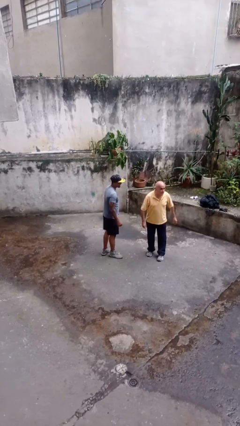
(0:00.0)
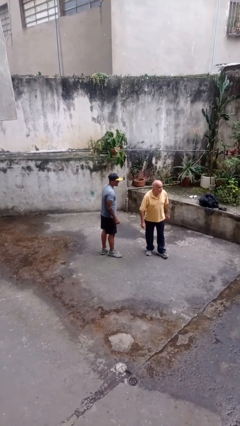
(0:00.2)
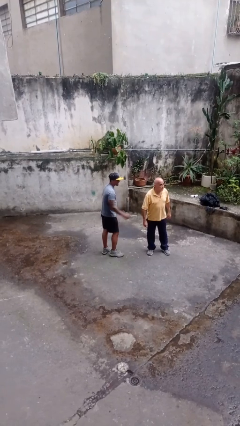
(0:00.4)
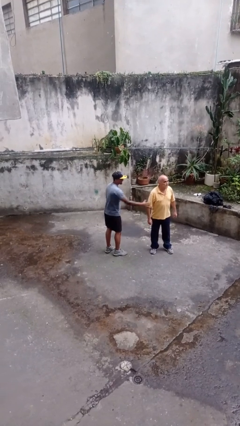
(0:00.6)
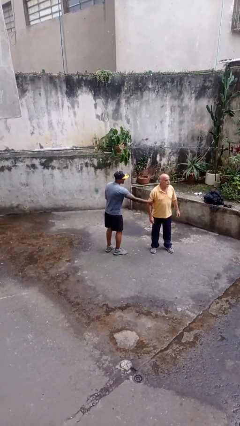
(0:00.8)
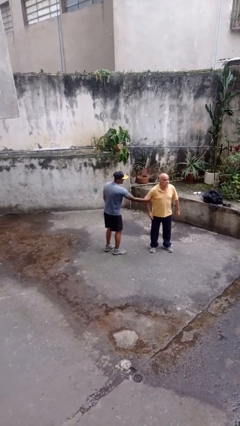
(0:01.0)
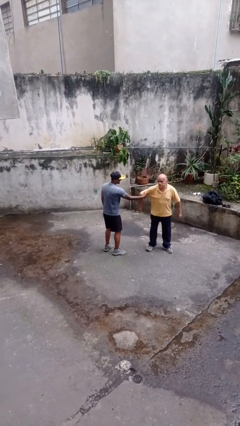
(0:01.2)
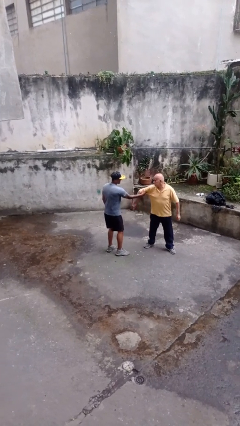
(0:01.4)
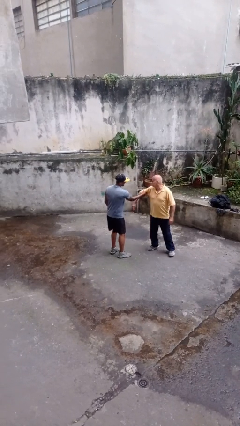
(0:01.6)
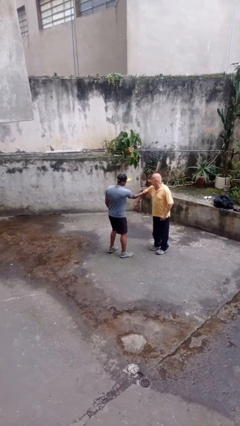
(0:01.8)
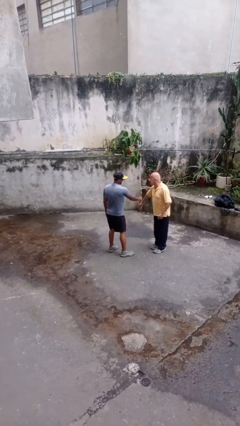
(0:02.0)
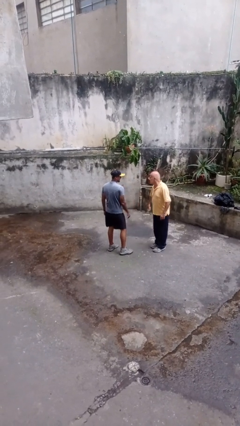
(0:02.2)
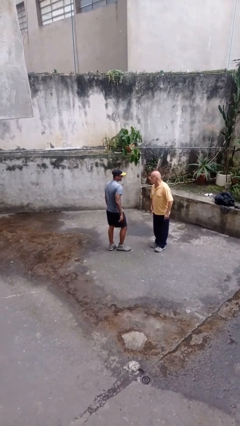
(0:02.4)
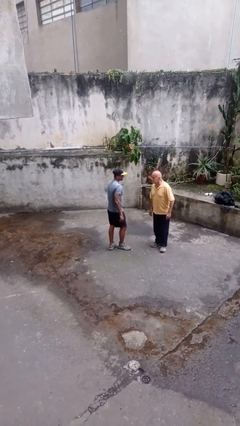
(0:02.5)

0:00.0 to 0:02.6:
person grabs person by bicep

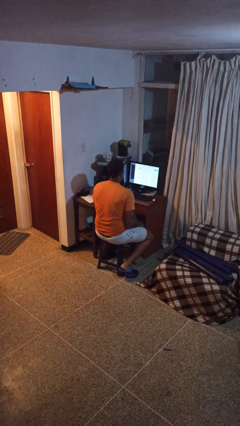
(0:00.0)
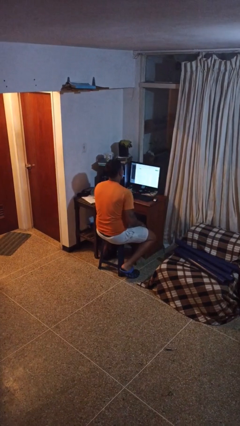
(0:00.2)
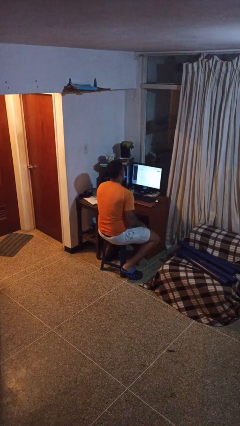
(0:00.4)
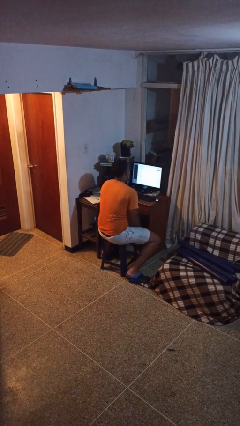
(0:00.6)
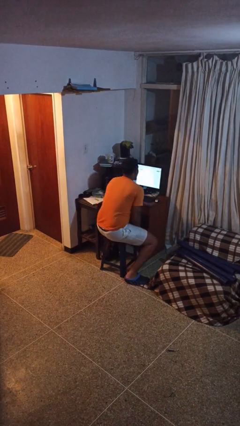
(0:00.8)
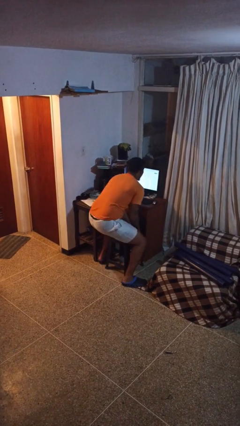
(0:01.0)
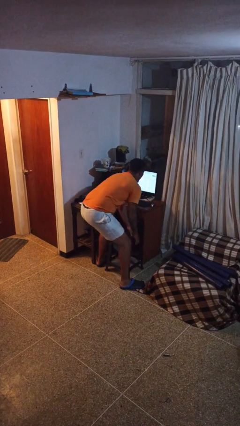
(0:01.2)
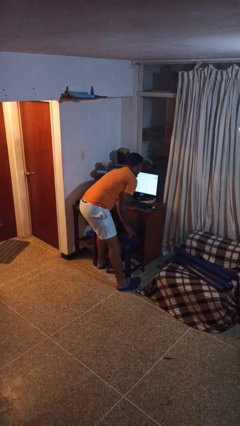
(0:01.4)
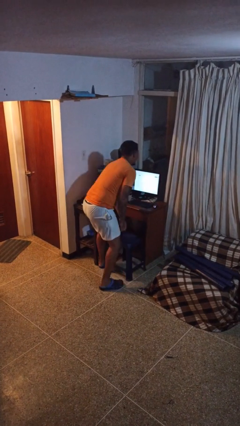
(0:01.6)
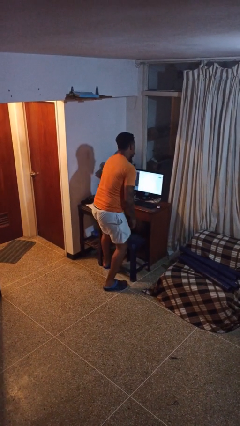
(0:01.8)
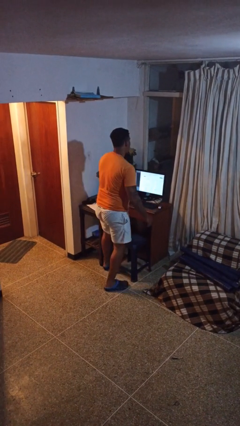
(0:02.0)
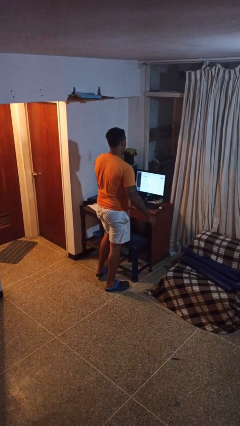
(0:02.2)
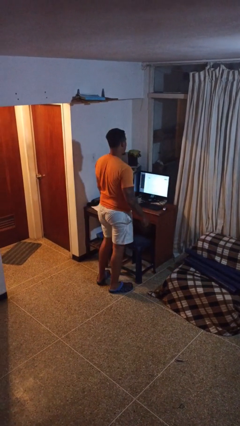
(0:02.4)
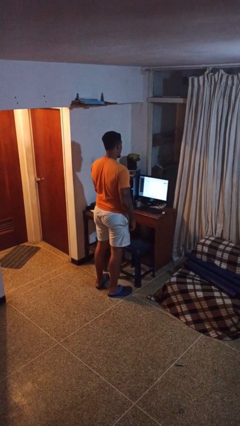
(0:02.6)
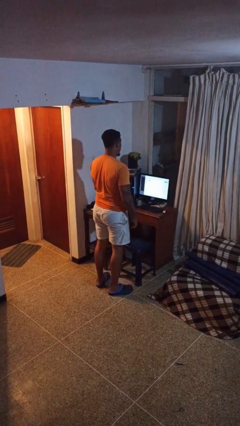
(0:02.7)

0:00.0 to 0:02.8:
person stands up

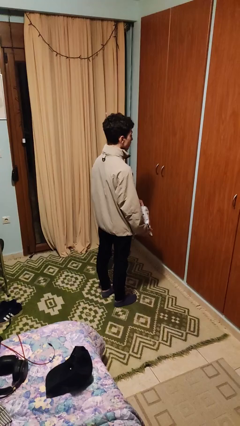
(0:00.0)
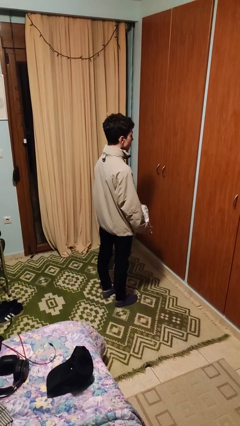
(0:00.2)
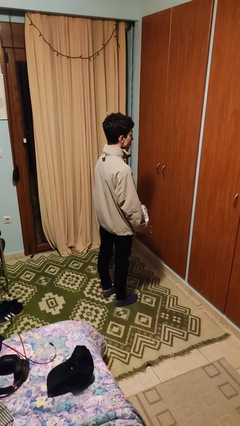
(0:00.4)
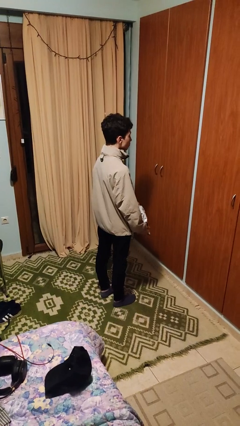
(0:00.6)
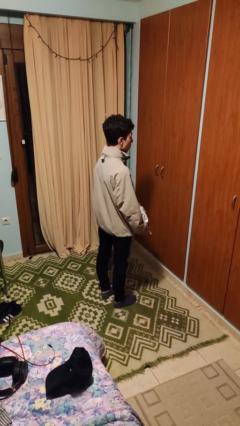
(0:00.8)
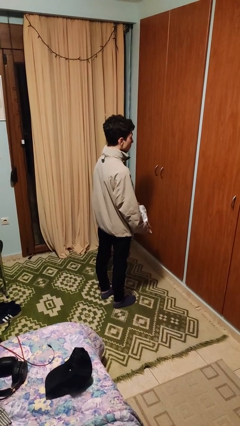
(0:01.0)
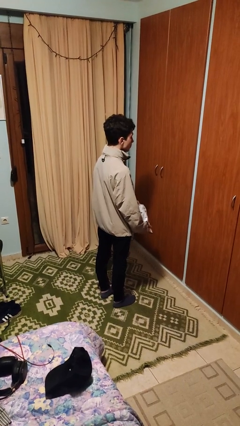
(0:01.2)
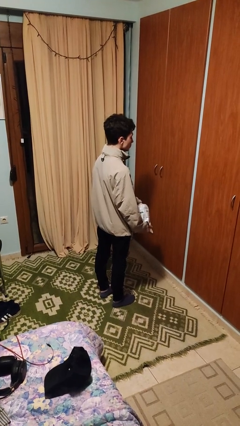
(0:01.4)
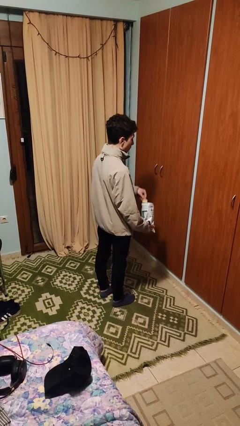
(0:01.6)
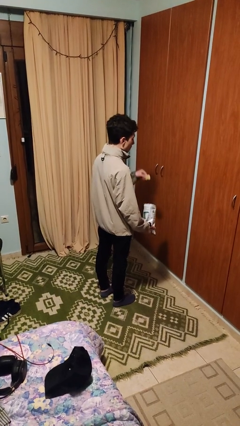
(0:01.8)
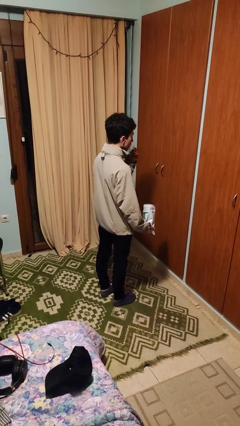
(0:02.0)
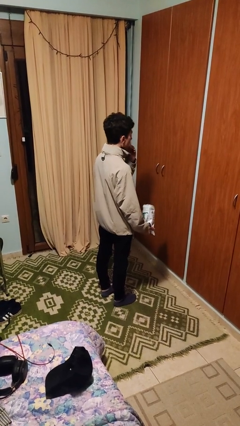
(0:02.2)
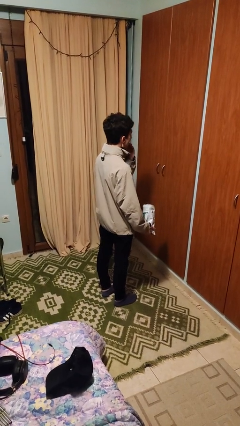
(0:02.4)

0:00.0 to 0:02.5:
person eats snack from bag

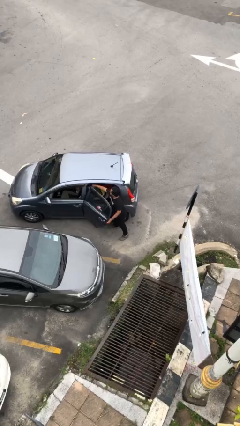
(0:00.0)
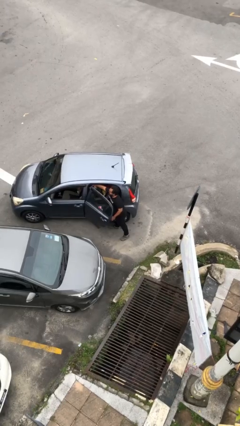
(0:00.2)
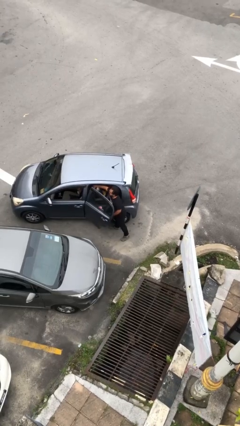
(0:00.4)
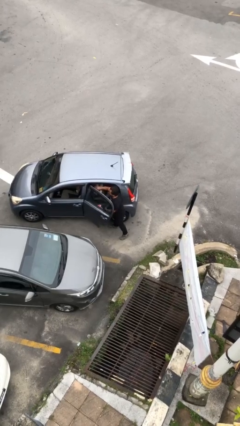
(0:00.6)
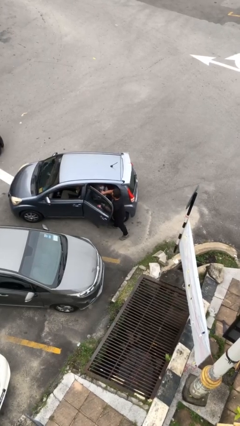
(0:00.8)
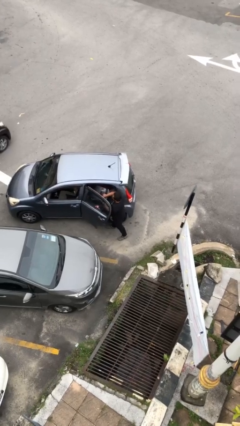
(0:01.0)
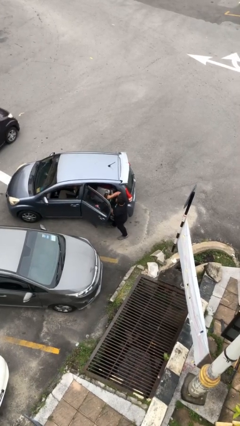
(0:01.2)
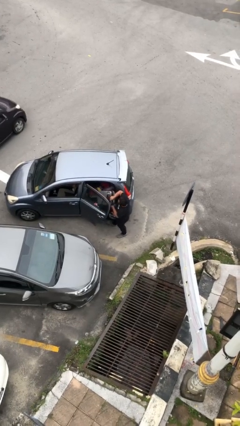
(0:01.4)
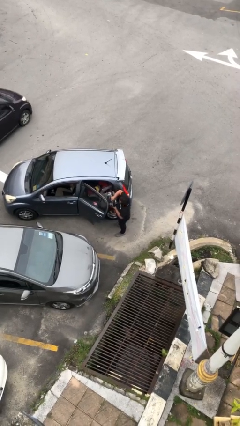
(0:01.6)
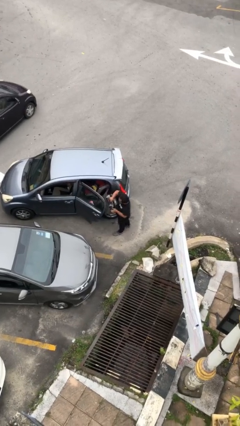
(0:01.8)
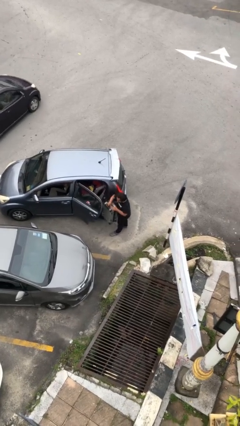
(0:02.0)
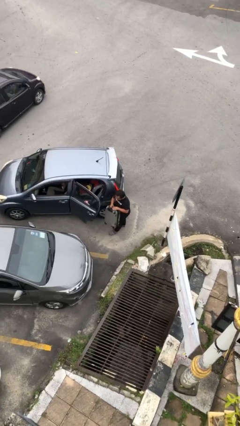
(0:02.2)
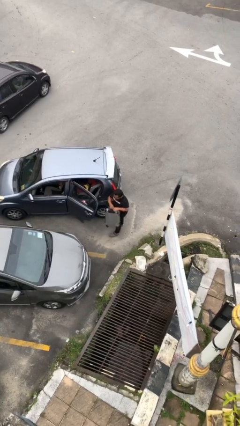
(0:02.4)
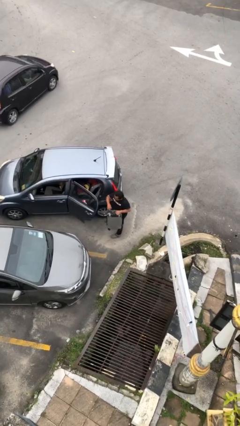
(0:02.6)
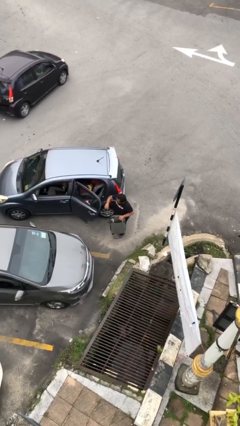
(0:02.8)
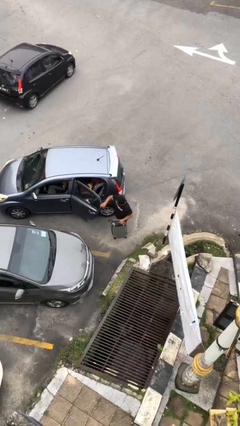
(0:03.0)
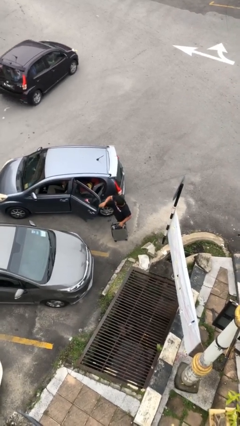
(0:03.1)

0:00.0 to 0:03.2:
person unloads car

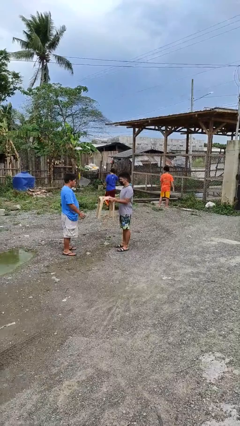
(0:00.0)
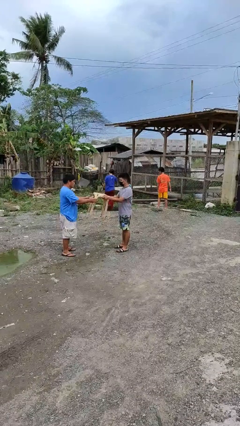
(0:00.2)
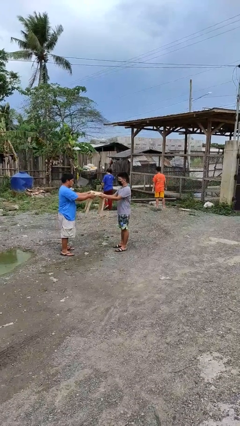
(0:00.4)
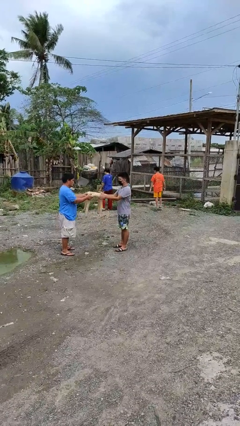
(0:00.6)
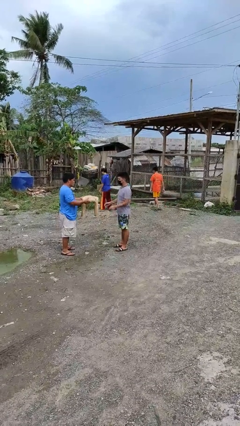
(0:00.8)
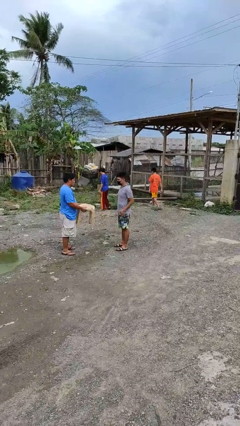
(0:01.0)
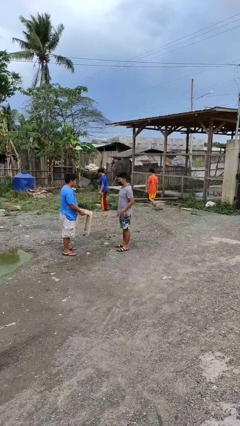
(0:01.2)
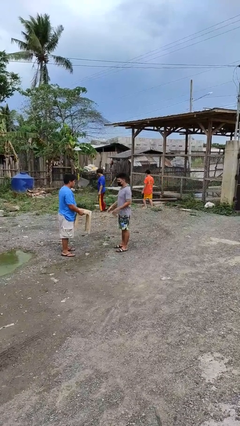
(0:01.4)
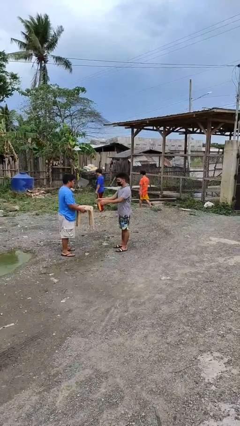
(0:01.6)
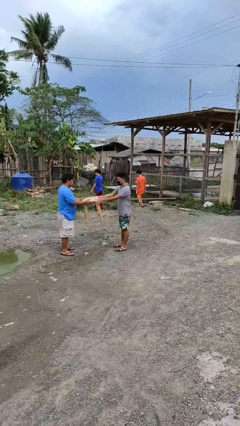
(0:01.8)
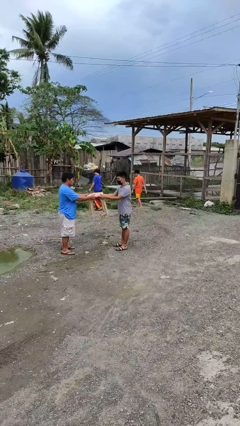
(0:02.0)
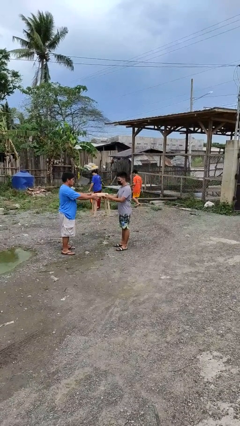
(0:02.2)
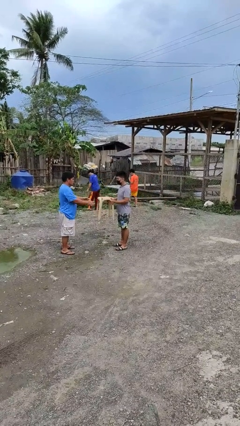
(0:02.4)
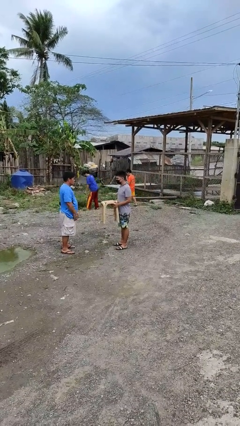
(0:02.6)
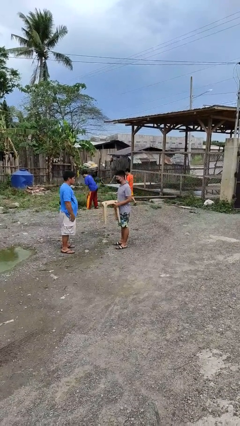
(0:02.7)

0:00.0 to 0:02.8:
person transfers object to person

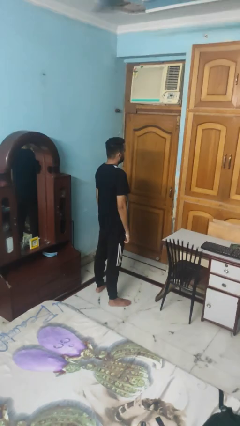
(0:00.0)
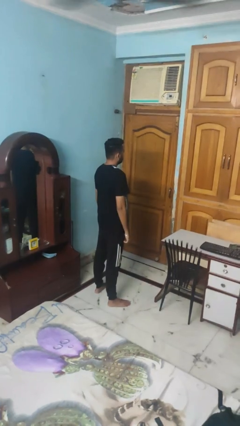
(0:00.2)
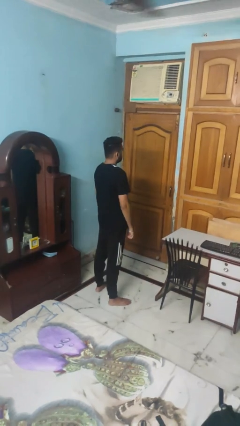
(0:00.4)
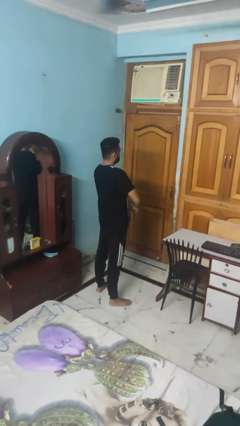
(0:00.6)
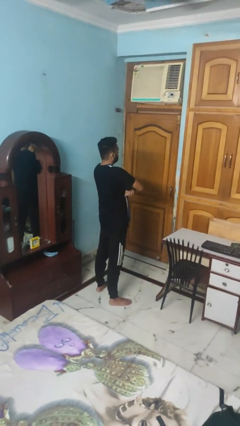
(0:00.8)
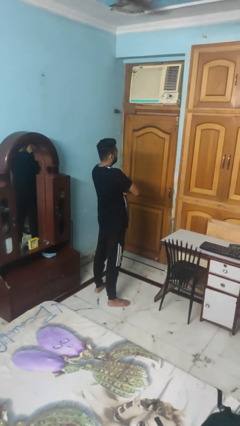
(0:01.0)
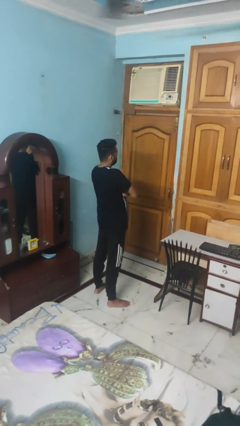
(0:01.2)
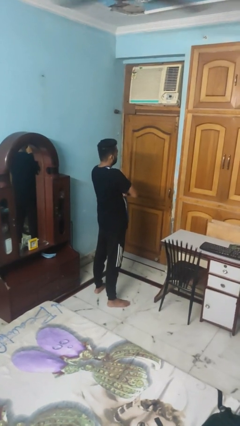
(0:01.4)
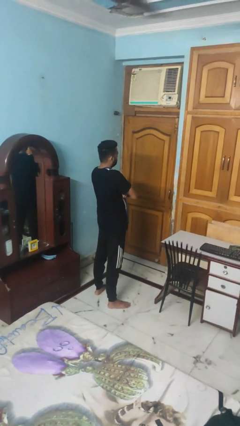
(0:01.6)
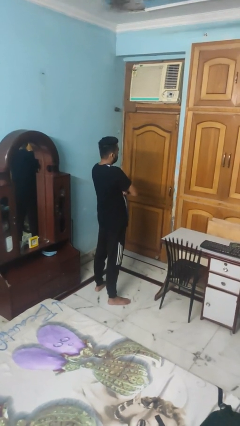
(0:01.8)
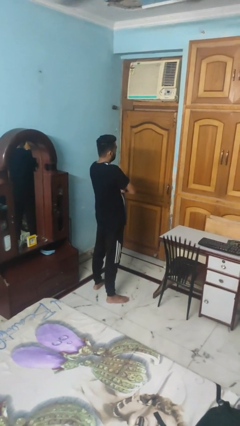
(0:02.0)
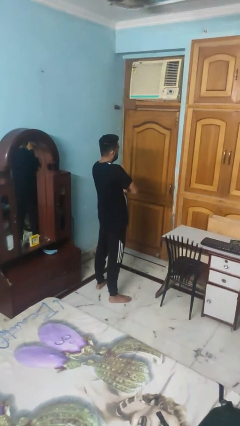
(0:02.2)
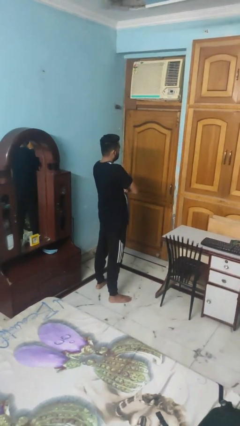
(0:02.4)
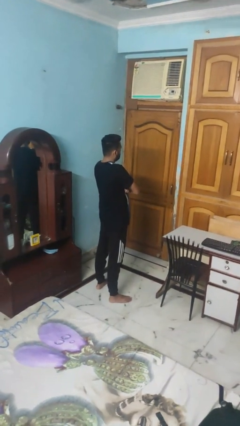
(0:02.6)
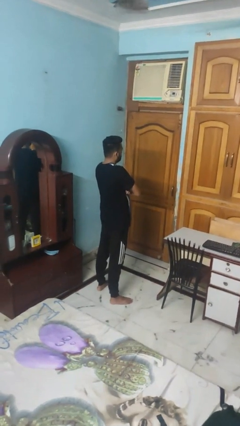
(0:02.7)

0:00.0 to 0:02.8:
person crosses arms

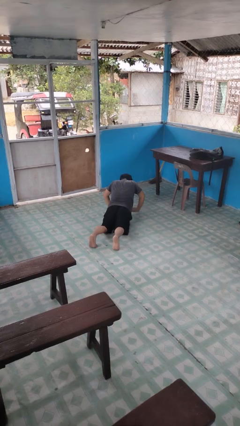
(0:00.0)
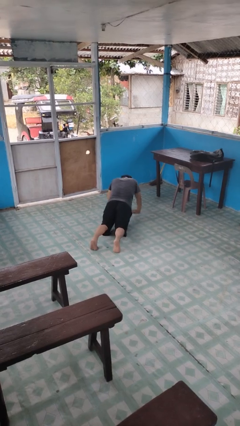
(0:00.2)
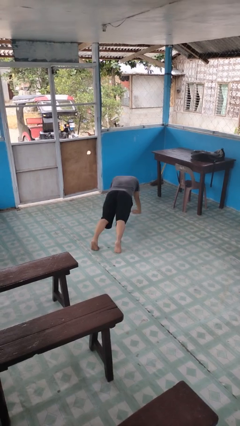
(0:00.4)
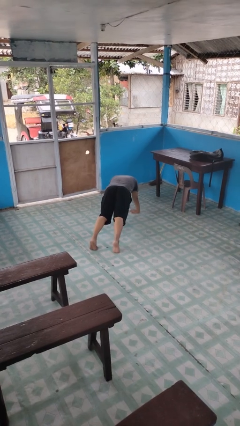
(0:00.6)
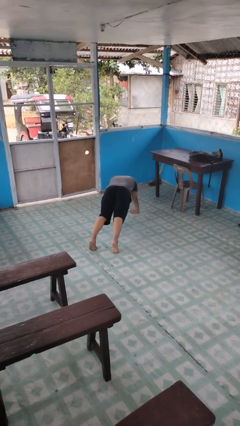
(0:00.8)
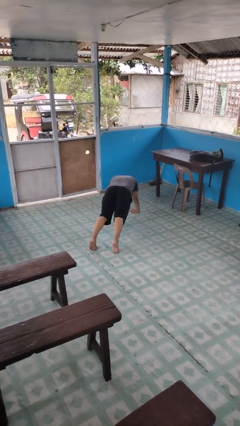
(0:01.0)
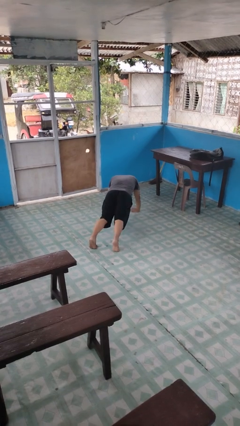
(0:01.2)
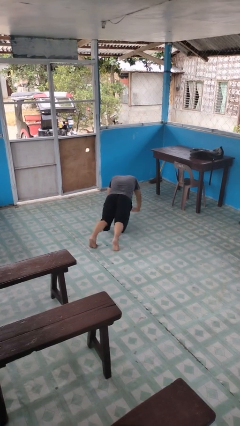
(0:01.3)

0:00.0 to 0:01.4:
person exercises with pushup
